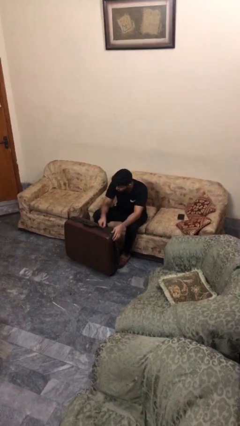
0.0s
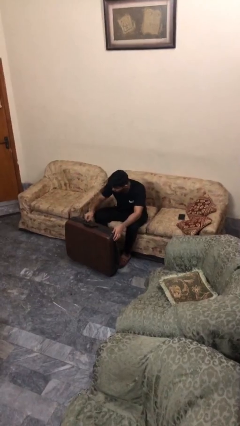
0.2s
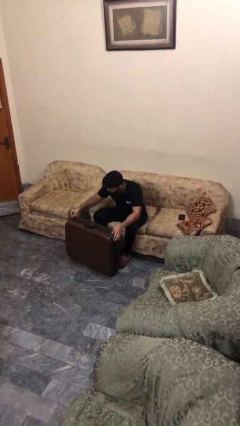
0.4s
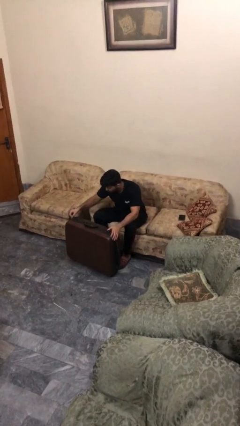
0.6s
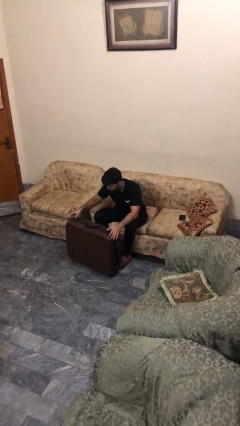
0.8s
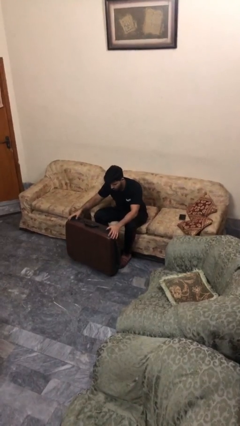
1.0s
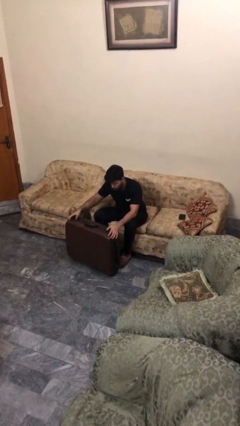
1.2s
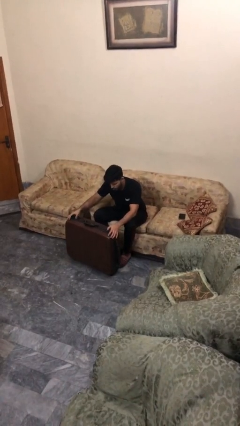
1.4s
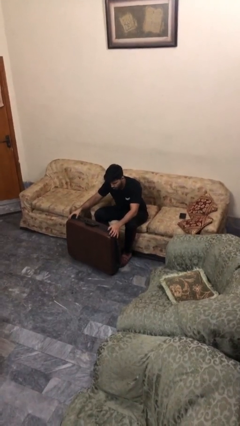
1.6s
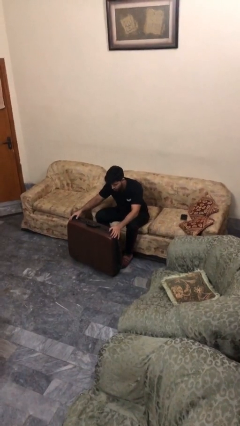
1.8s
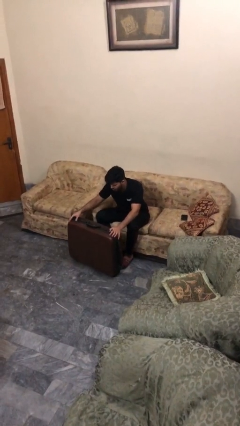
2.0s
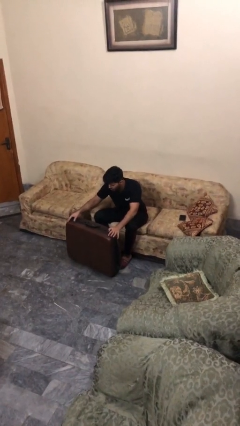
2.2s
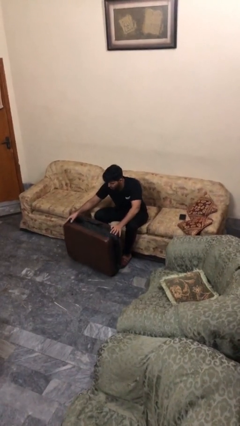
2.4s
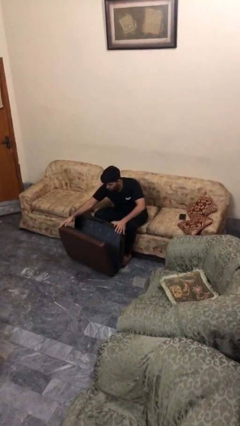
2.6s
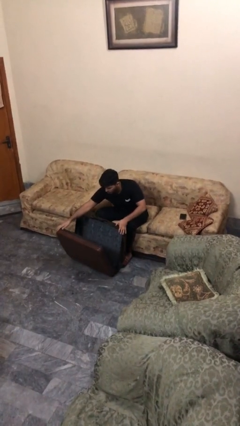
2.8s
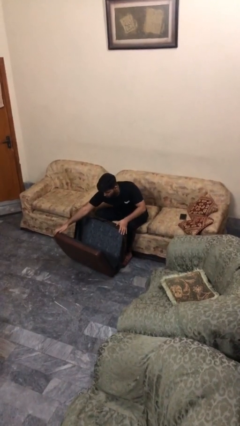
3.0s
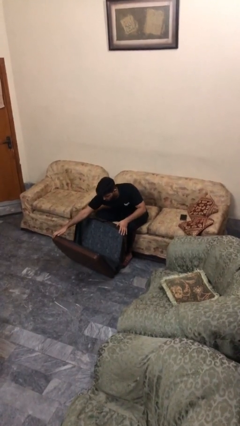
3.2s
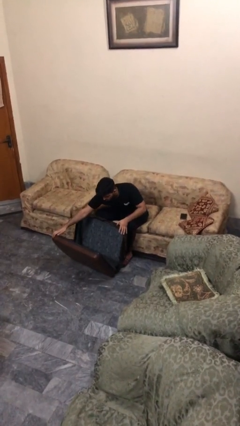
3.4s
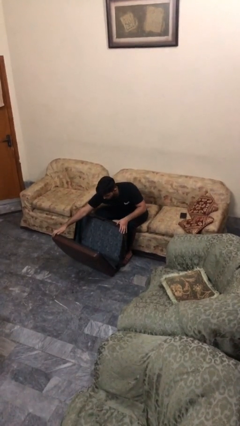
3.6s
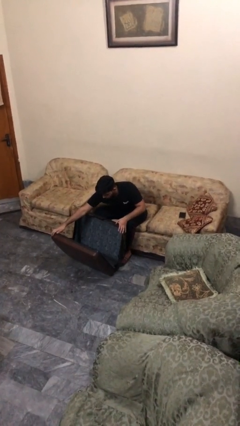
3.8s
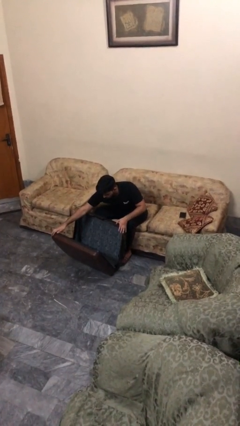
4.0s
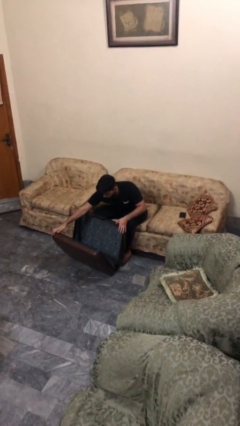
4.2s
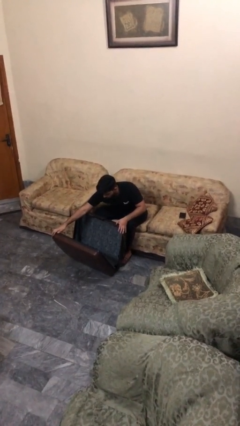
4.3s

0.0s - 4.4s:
person opens suitcase

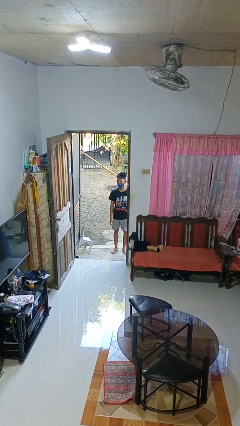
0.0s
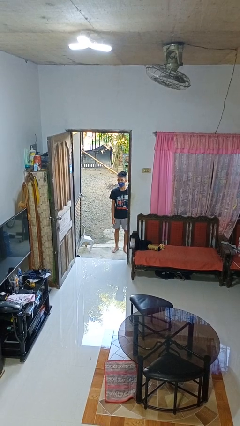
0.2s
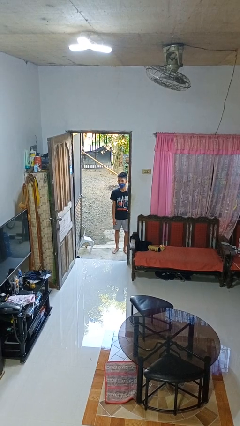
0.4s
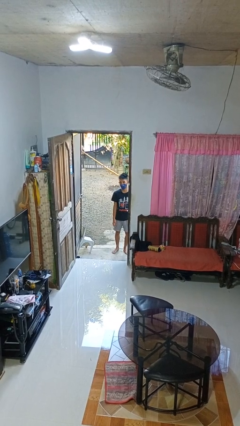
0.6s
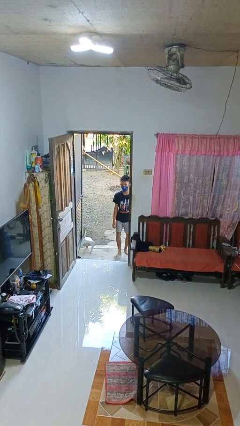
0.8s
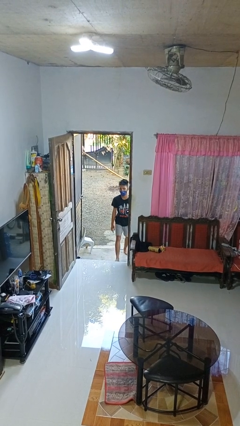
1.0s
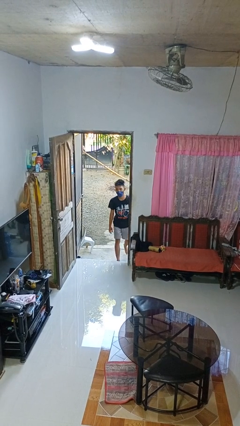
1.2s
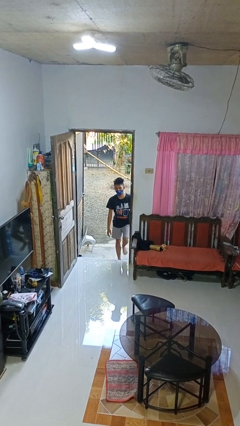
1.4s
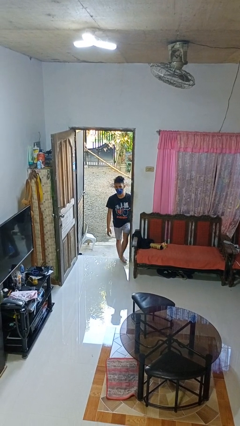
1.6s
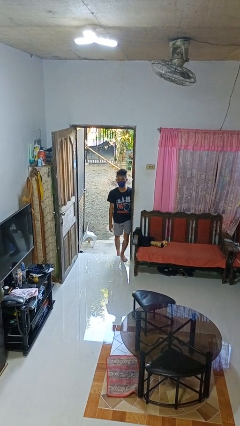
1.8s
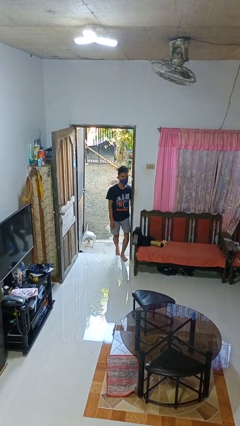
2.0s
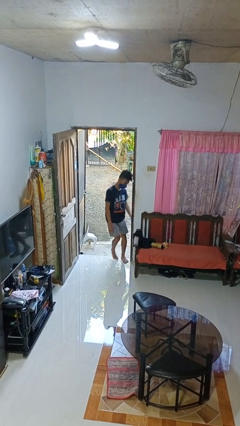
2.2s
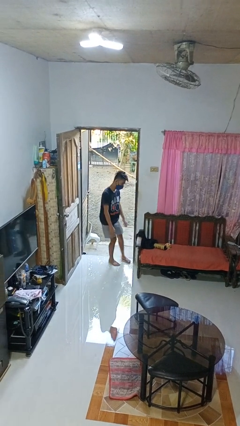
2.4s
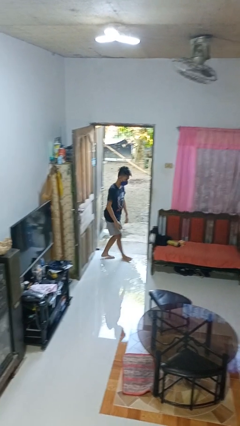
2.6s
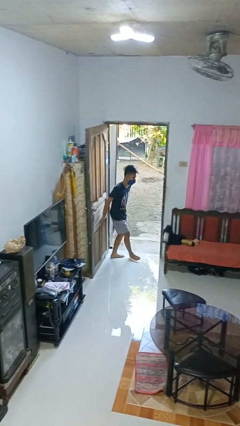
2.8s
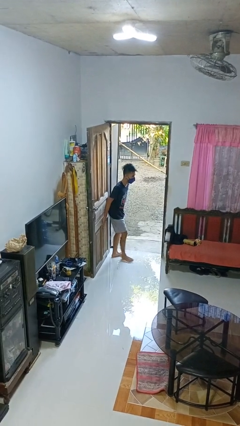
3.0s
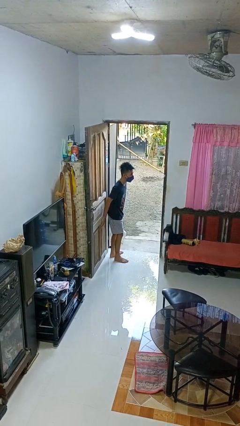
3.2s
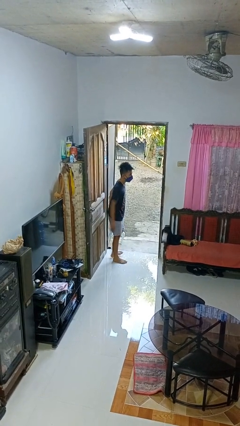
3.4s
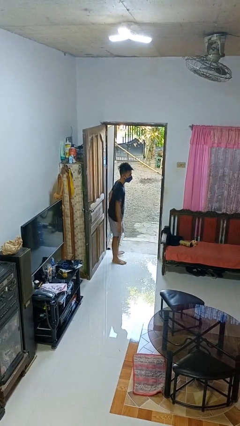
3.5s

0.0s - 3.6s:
person bumps into wall

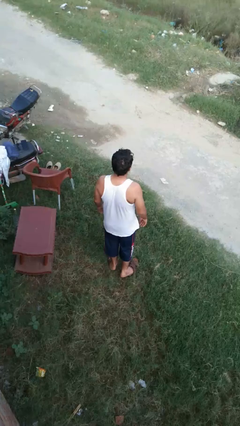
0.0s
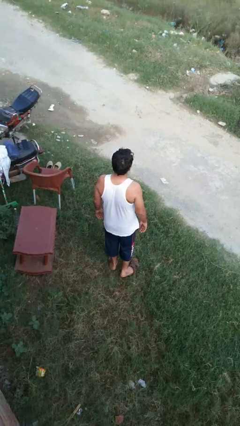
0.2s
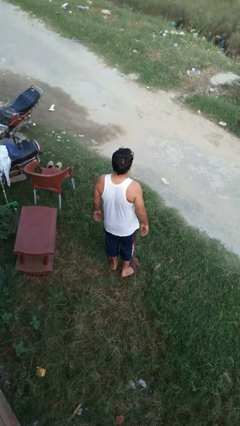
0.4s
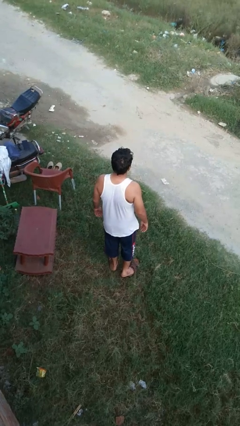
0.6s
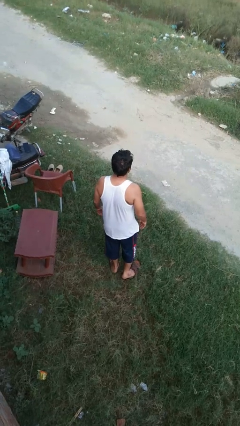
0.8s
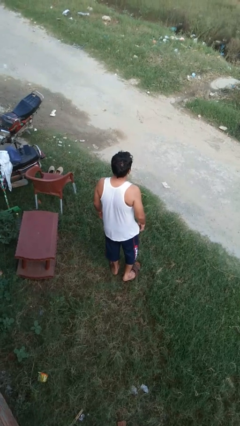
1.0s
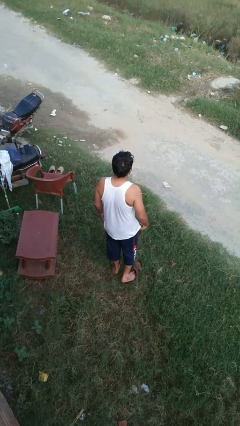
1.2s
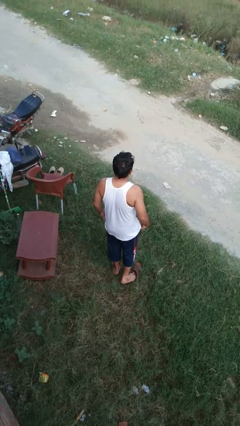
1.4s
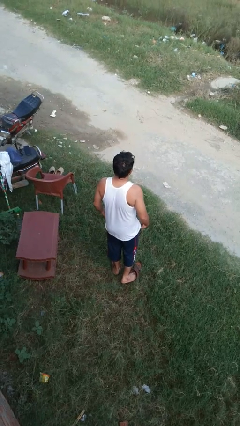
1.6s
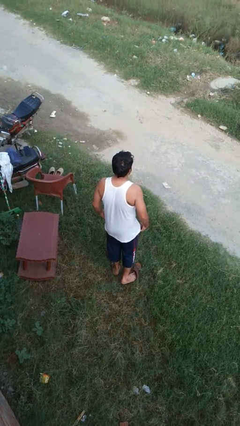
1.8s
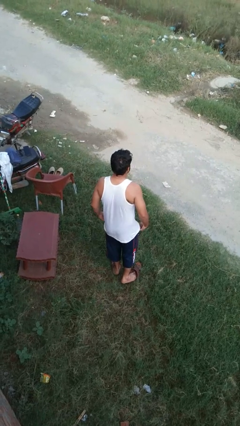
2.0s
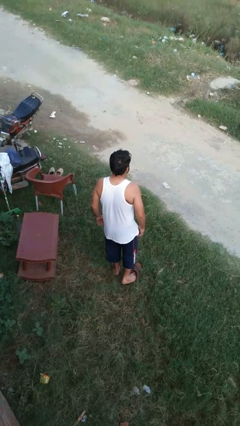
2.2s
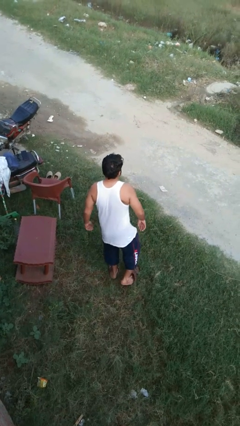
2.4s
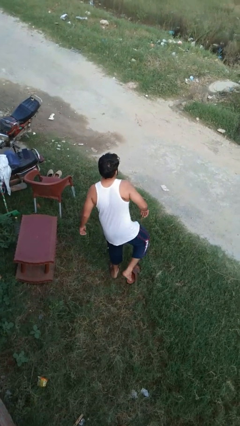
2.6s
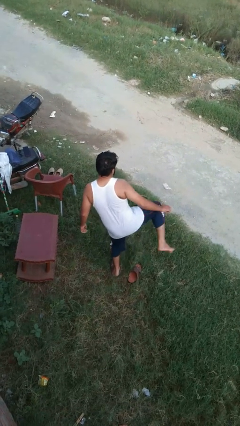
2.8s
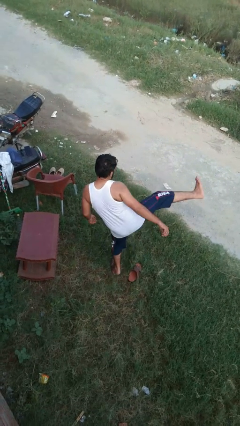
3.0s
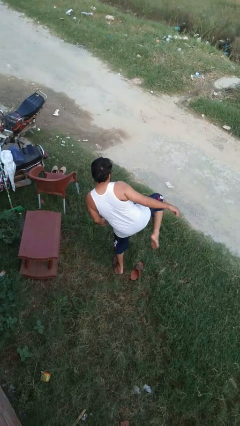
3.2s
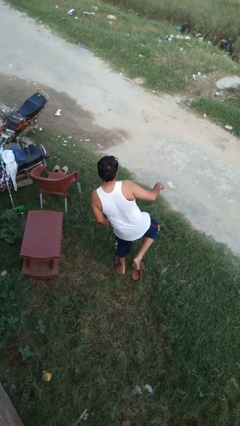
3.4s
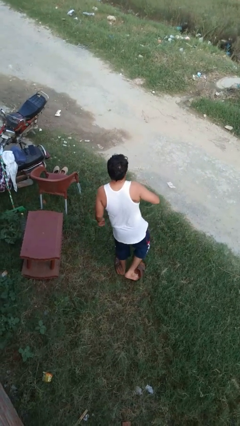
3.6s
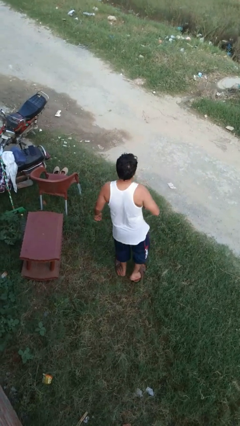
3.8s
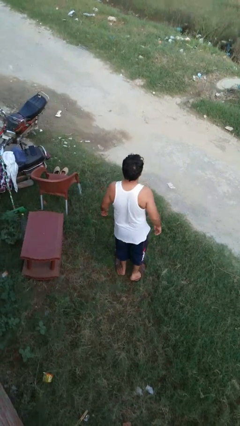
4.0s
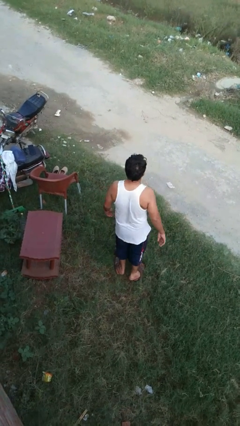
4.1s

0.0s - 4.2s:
person karate kicks

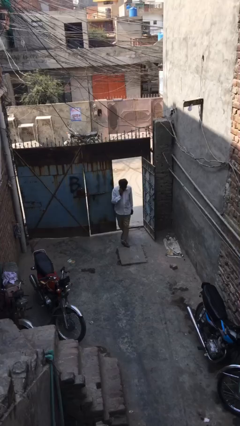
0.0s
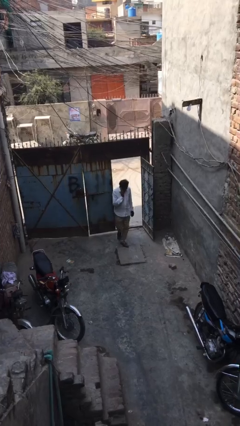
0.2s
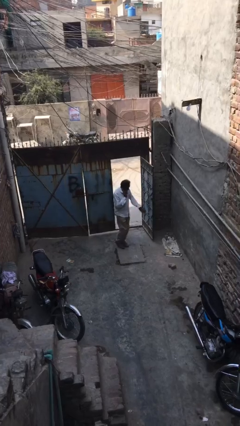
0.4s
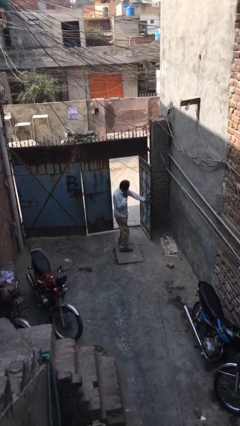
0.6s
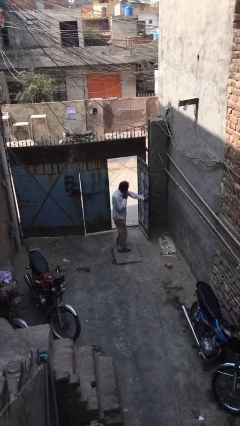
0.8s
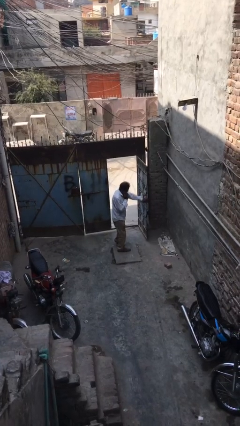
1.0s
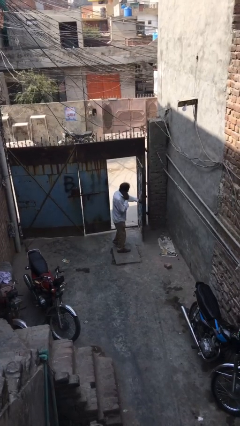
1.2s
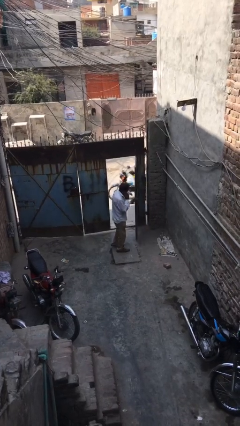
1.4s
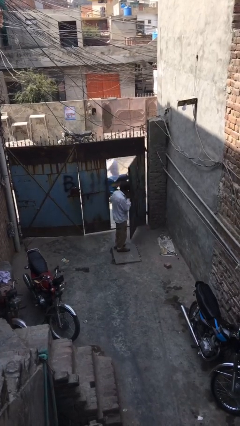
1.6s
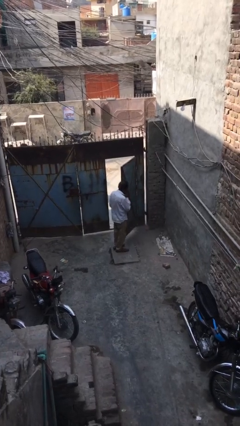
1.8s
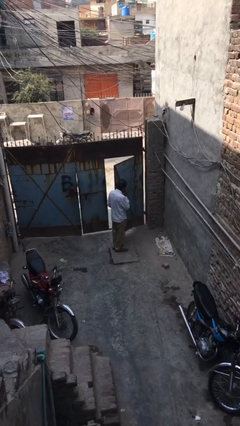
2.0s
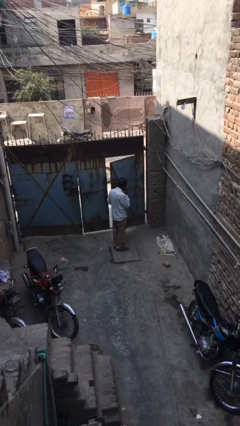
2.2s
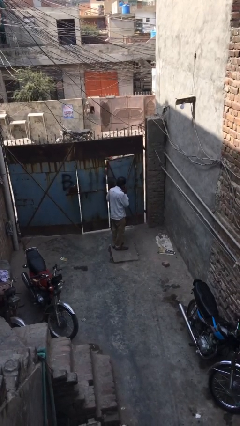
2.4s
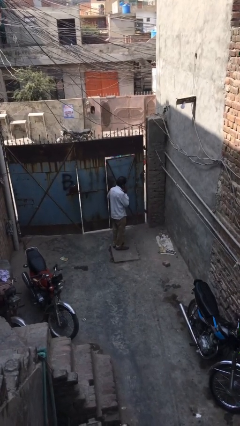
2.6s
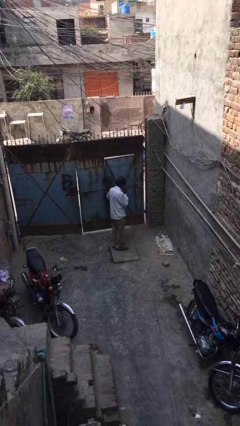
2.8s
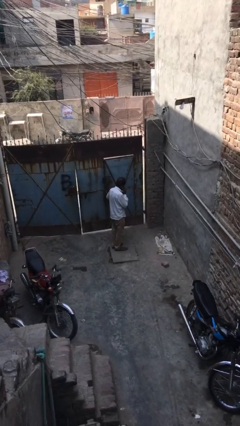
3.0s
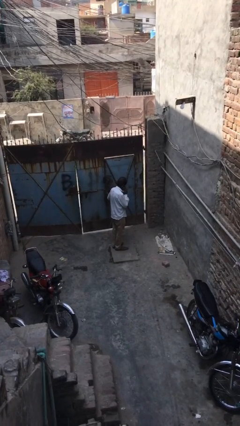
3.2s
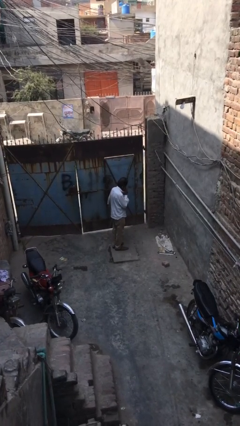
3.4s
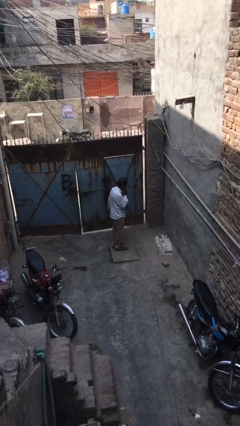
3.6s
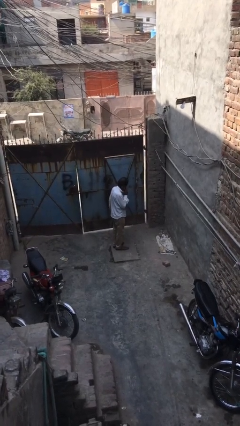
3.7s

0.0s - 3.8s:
person closes facility door

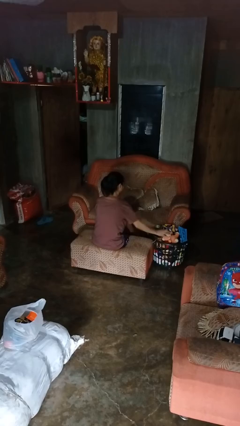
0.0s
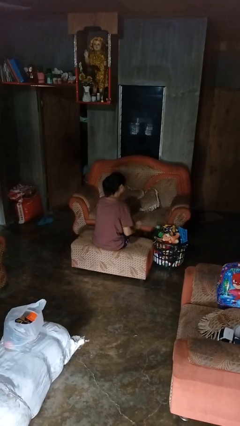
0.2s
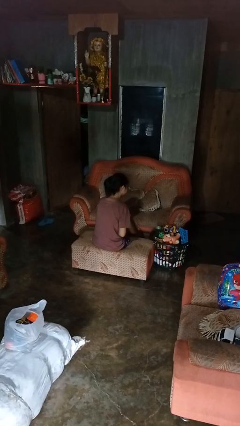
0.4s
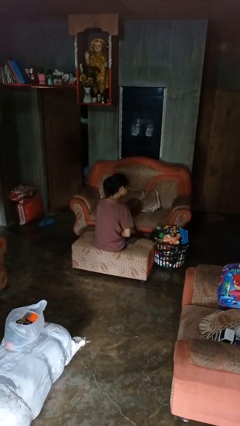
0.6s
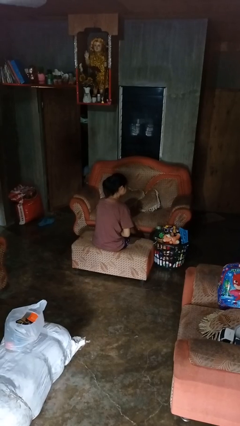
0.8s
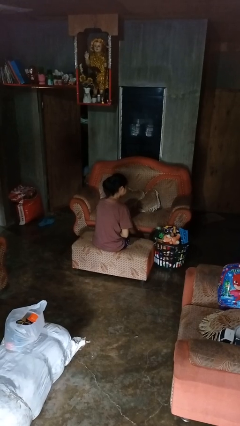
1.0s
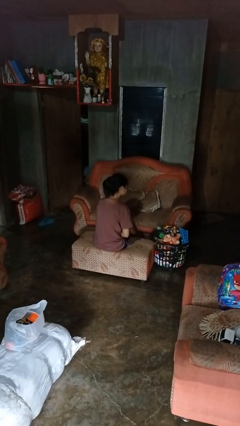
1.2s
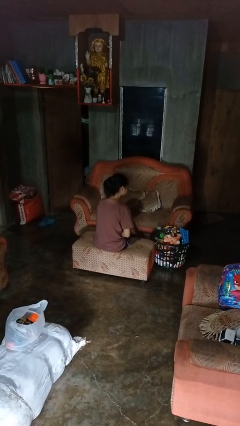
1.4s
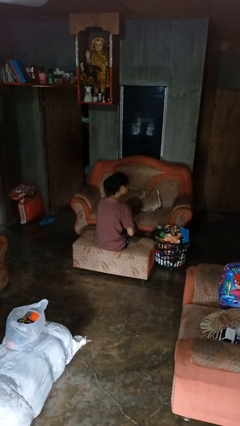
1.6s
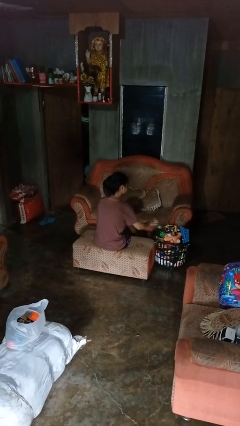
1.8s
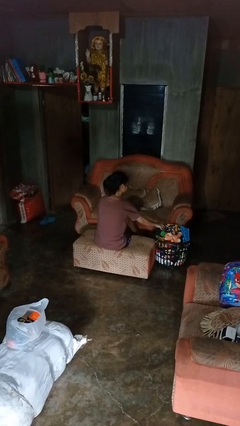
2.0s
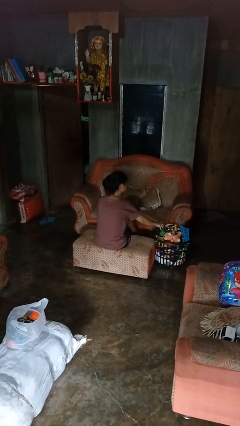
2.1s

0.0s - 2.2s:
person puts object into basket
